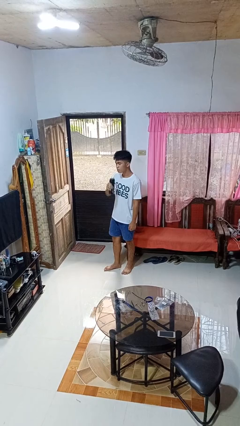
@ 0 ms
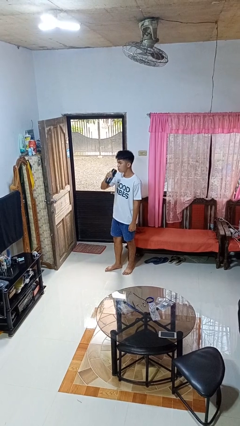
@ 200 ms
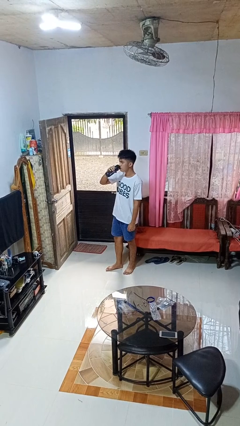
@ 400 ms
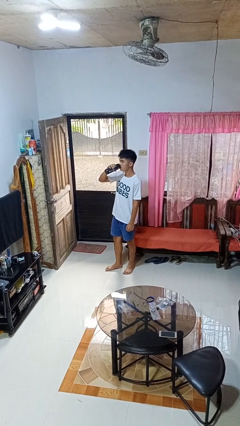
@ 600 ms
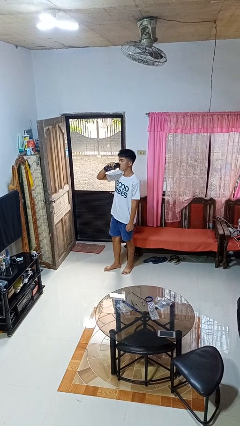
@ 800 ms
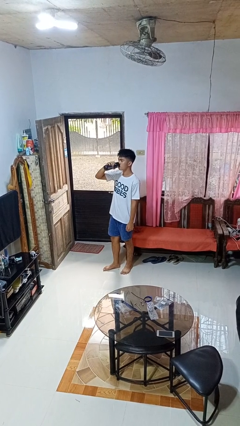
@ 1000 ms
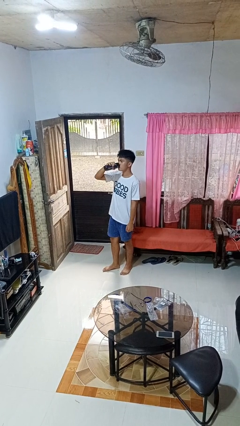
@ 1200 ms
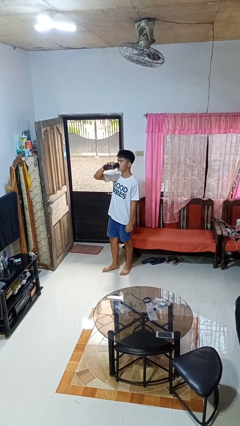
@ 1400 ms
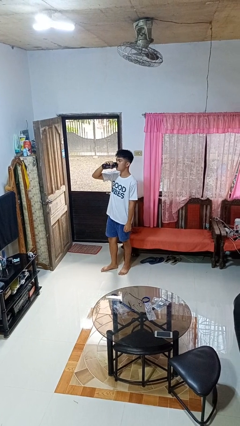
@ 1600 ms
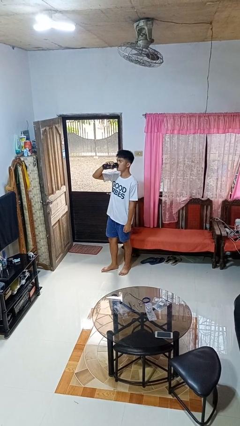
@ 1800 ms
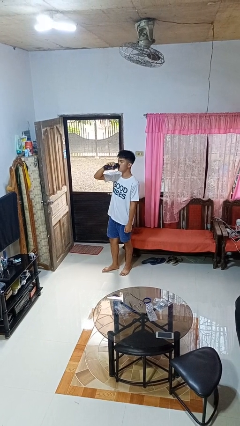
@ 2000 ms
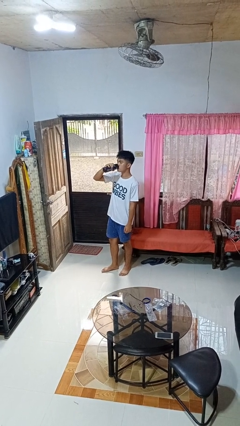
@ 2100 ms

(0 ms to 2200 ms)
person drinks from bottle

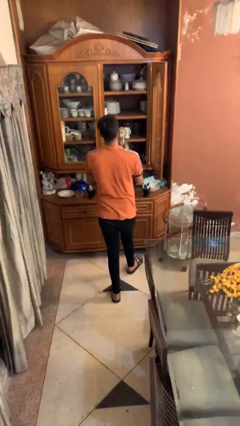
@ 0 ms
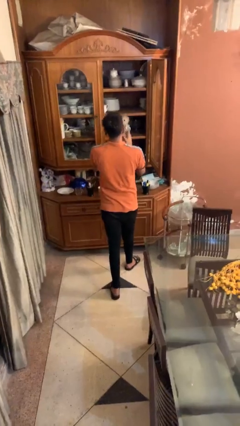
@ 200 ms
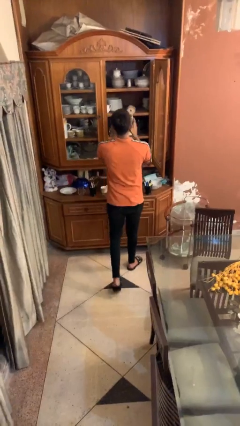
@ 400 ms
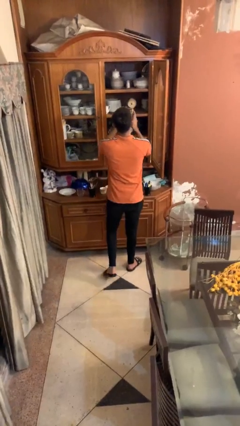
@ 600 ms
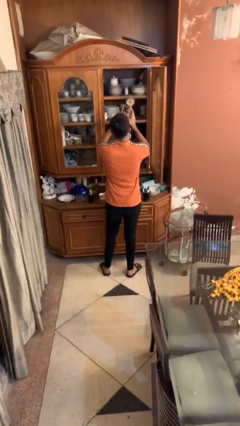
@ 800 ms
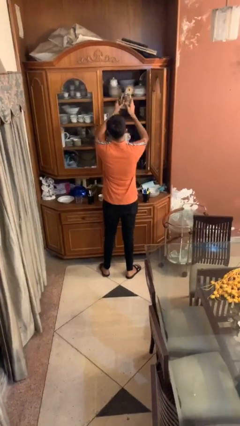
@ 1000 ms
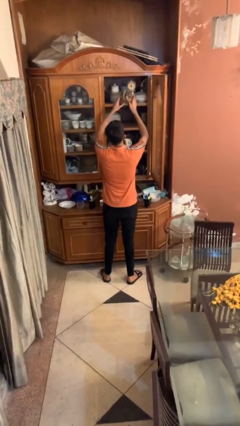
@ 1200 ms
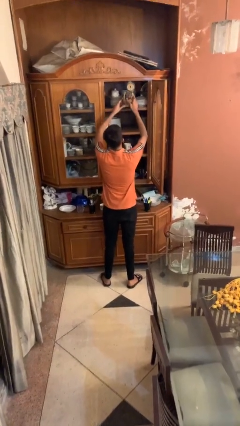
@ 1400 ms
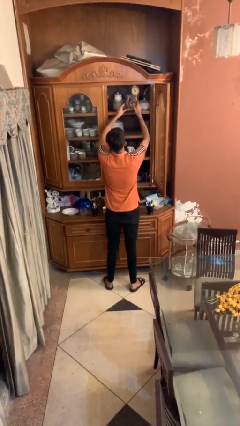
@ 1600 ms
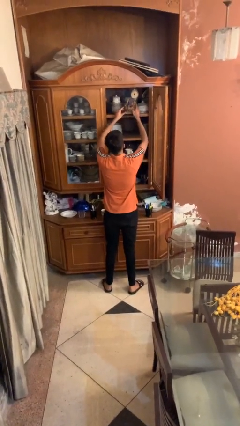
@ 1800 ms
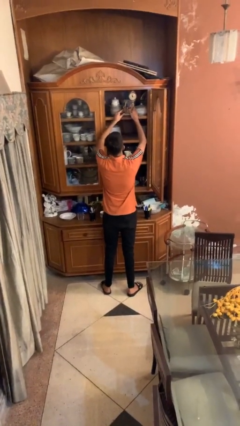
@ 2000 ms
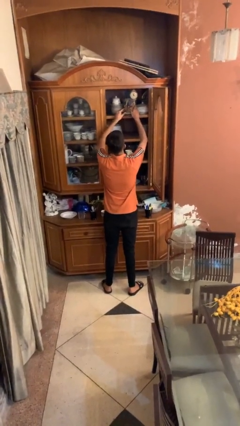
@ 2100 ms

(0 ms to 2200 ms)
person puts down object on shelf

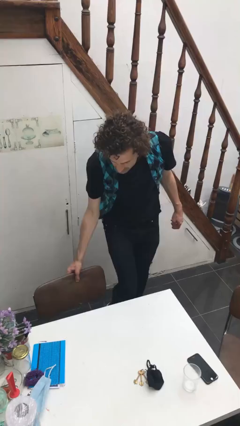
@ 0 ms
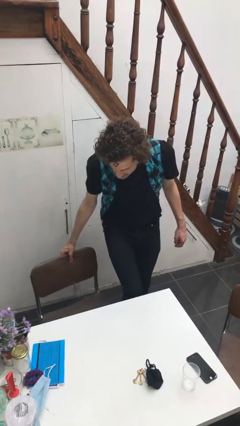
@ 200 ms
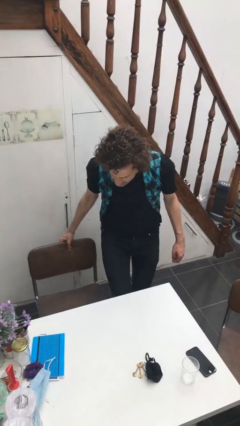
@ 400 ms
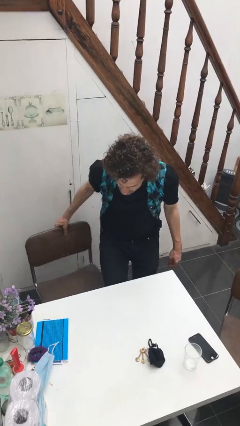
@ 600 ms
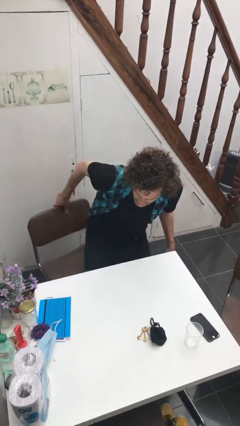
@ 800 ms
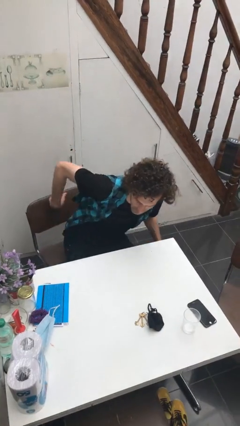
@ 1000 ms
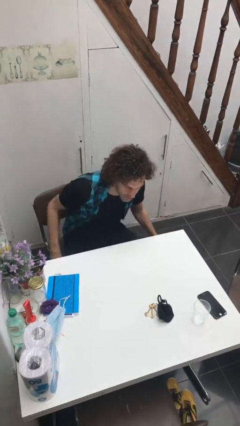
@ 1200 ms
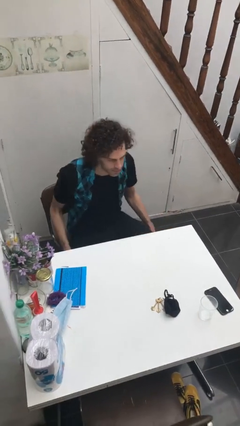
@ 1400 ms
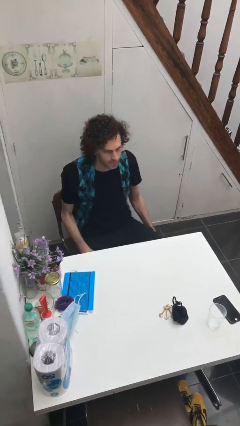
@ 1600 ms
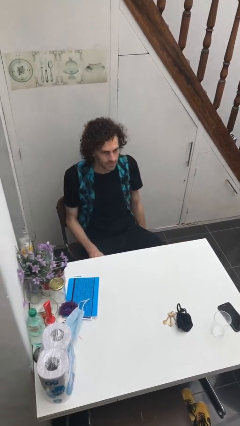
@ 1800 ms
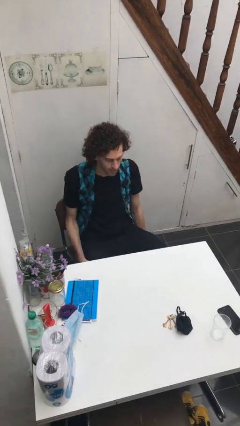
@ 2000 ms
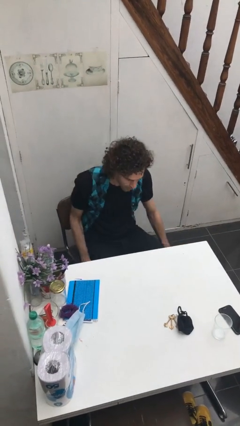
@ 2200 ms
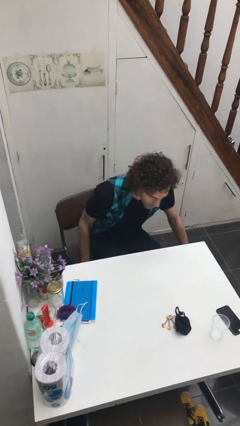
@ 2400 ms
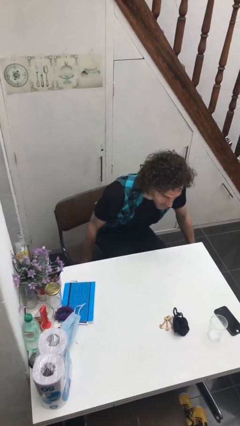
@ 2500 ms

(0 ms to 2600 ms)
person sits down

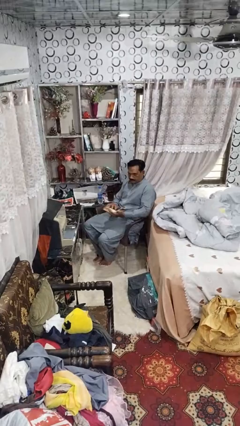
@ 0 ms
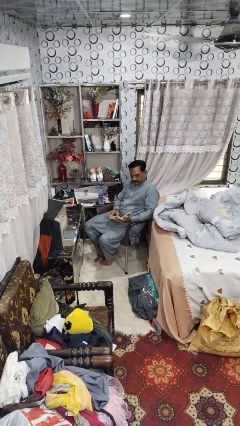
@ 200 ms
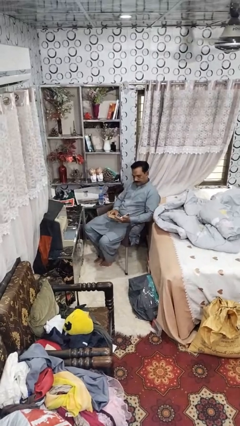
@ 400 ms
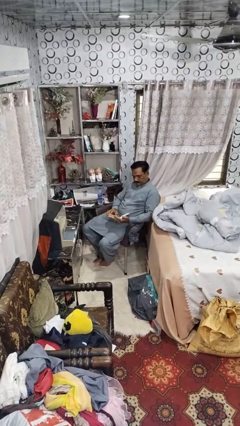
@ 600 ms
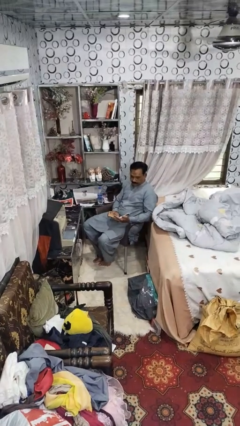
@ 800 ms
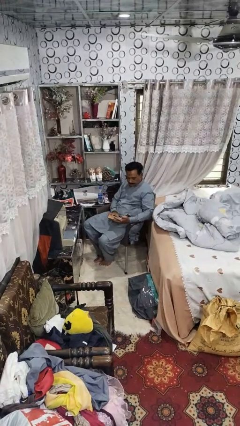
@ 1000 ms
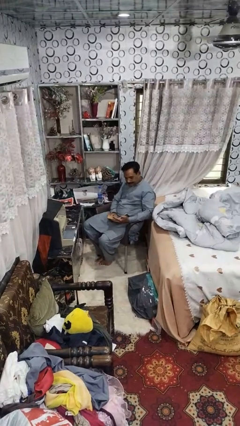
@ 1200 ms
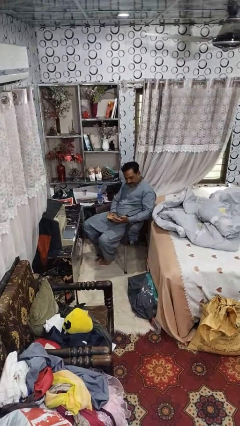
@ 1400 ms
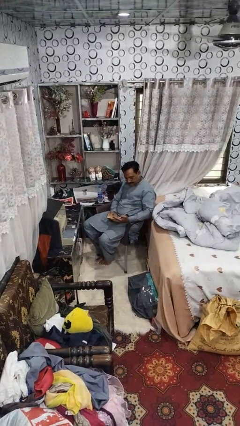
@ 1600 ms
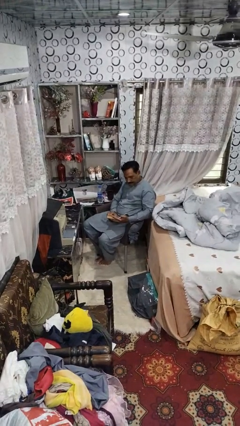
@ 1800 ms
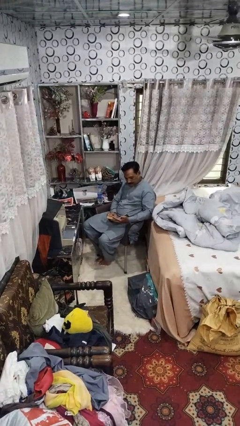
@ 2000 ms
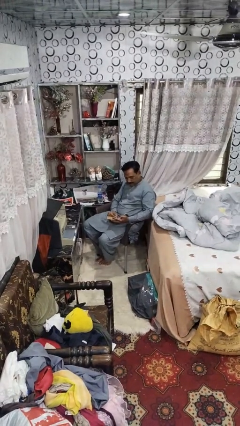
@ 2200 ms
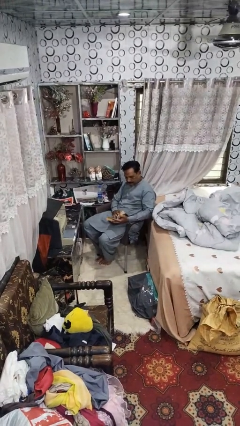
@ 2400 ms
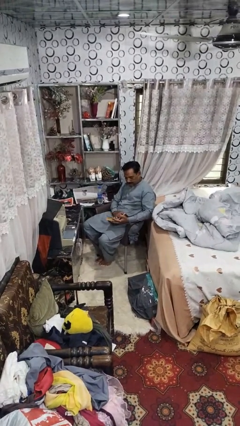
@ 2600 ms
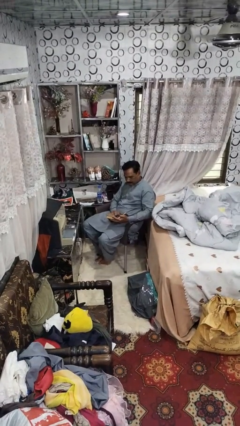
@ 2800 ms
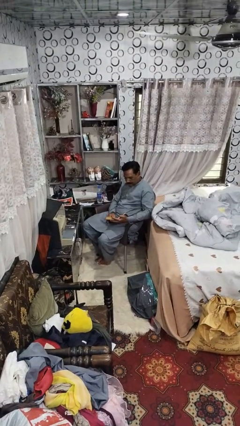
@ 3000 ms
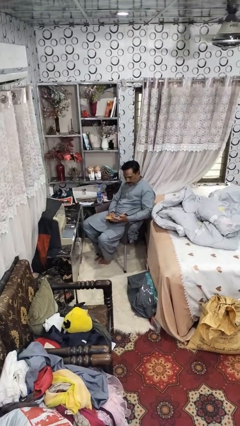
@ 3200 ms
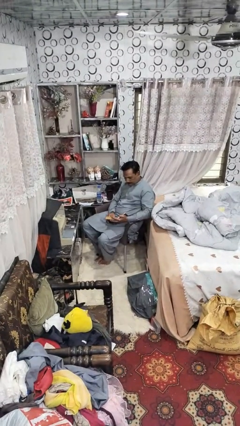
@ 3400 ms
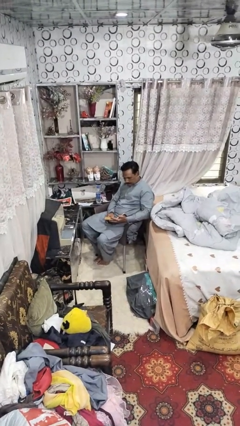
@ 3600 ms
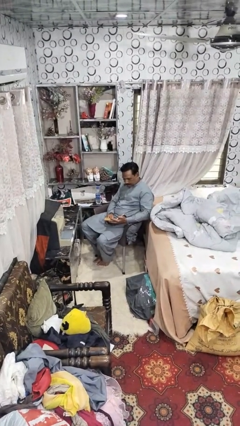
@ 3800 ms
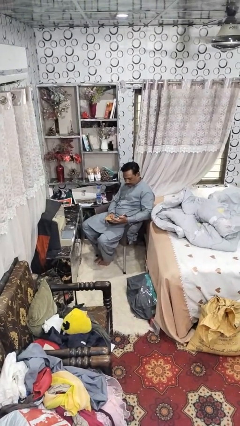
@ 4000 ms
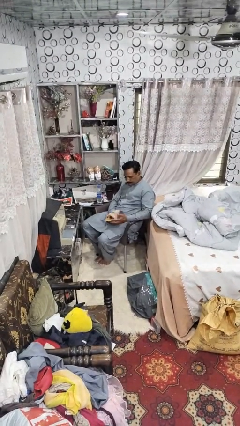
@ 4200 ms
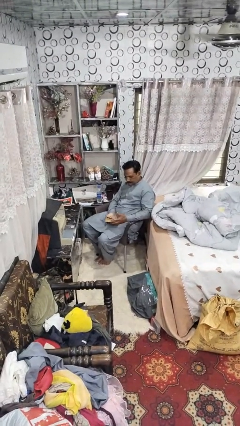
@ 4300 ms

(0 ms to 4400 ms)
person reads book

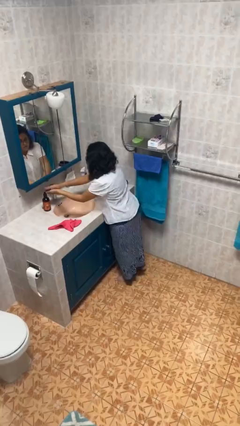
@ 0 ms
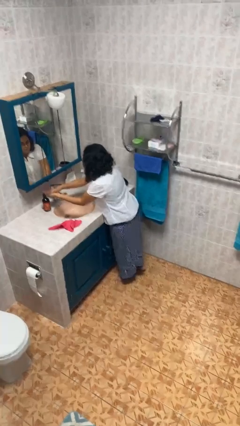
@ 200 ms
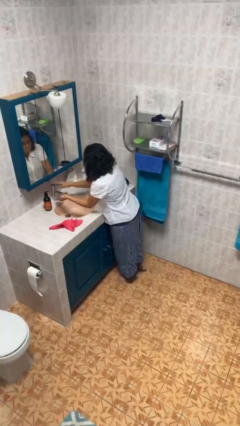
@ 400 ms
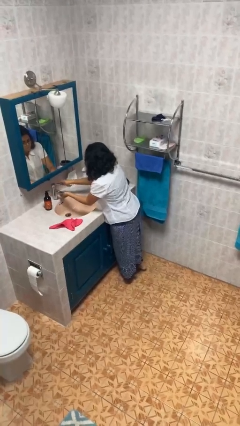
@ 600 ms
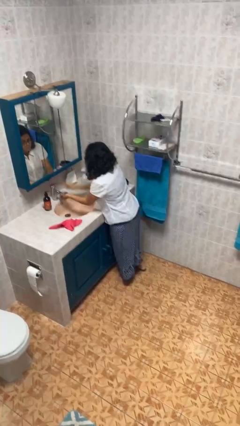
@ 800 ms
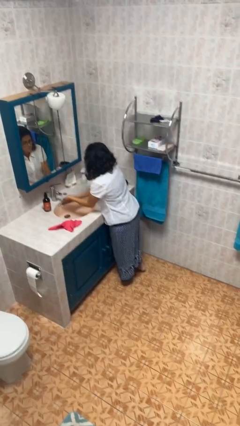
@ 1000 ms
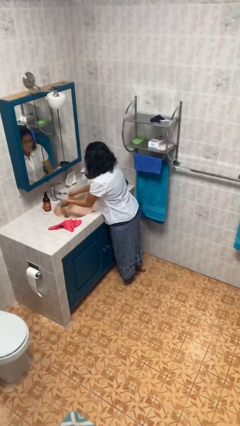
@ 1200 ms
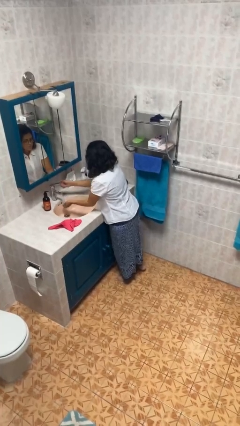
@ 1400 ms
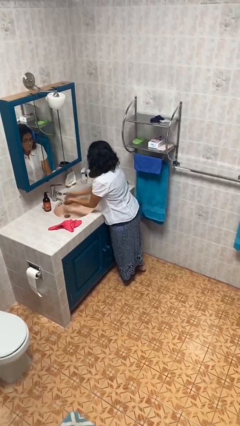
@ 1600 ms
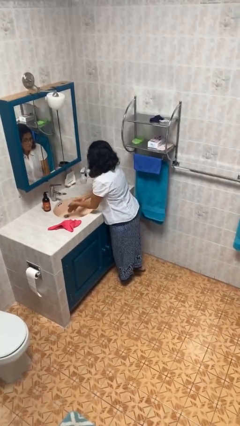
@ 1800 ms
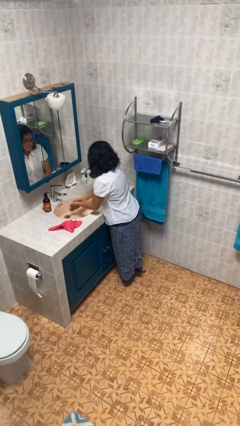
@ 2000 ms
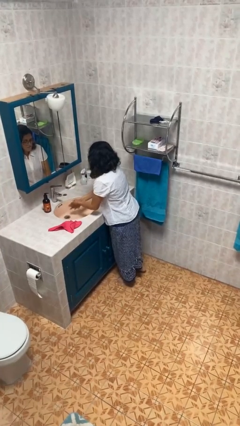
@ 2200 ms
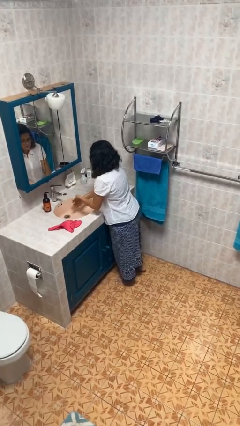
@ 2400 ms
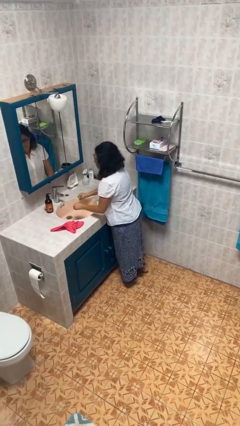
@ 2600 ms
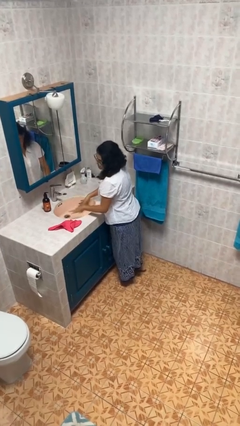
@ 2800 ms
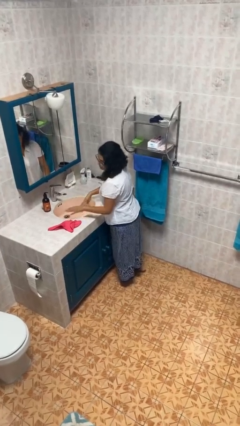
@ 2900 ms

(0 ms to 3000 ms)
person washes hands

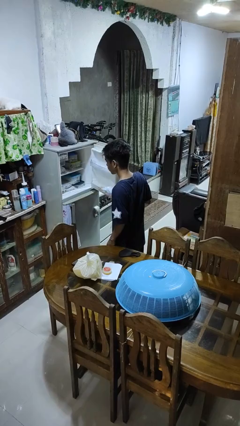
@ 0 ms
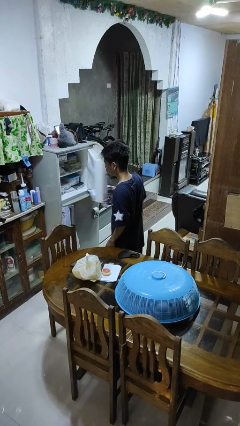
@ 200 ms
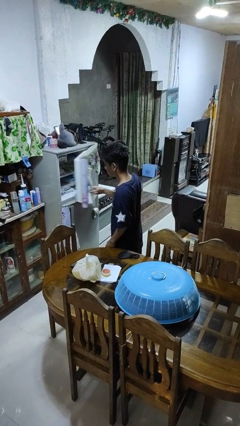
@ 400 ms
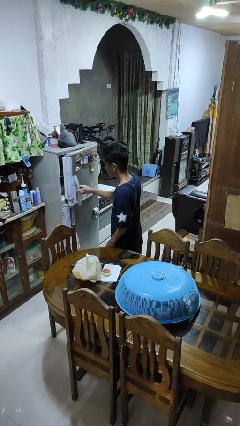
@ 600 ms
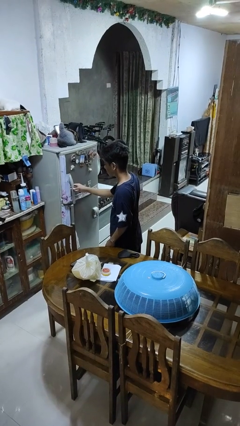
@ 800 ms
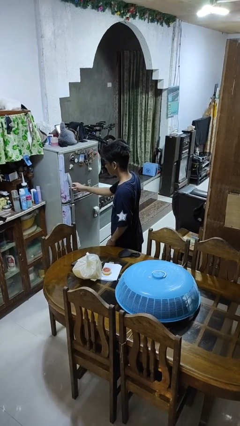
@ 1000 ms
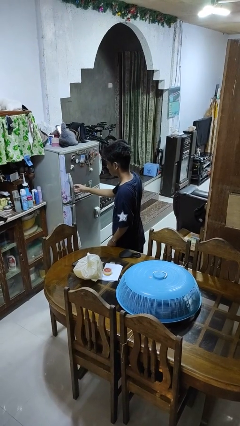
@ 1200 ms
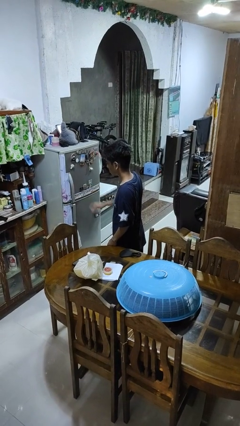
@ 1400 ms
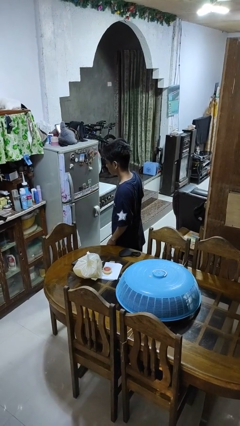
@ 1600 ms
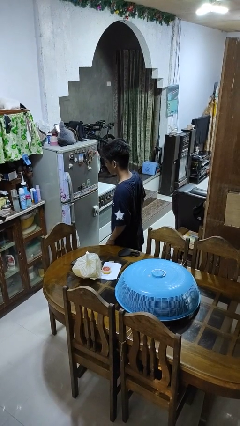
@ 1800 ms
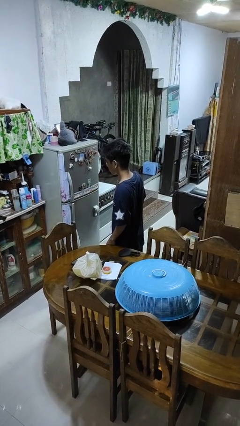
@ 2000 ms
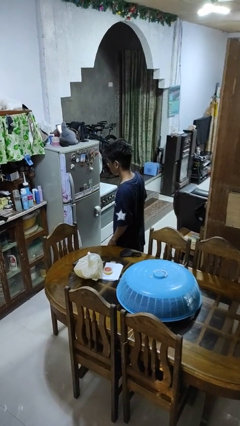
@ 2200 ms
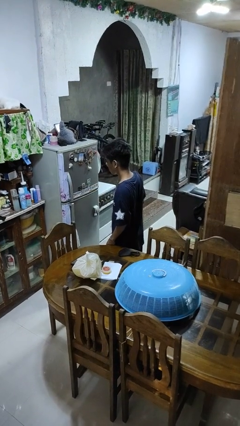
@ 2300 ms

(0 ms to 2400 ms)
person closes refrigerator
